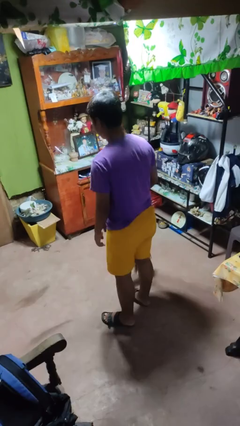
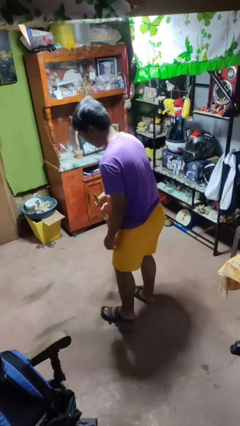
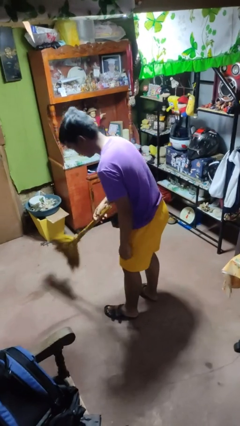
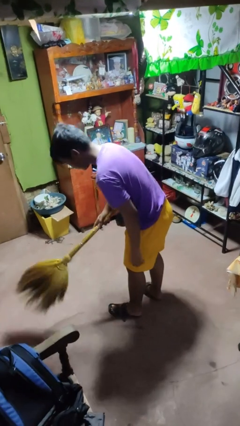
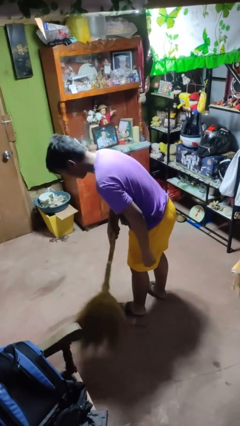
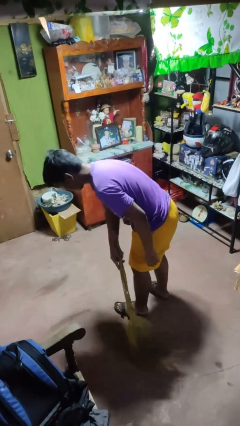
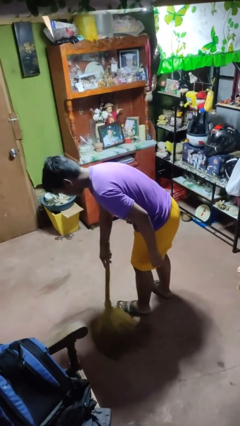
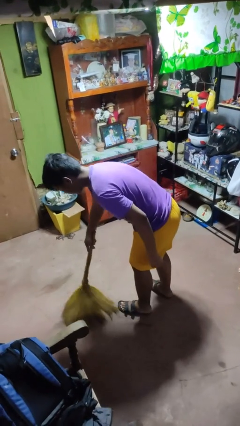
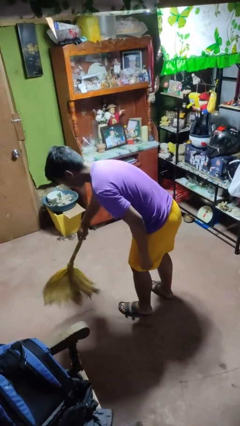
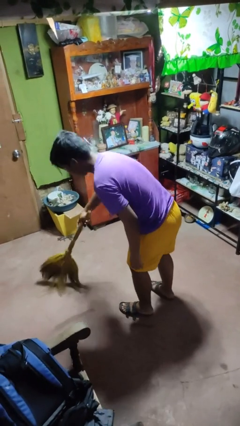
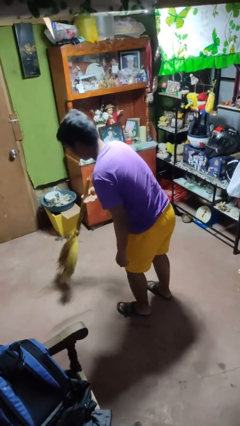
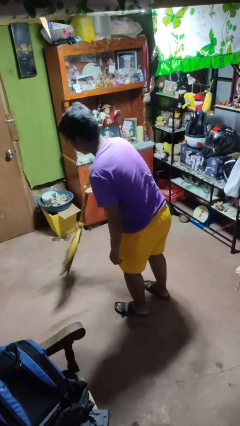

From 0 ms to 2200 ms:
person sweeps floor

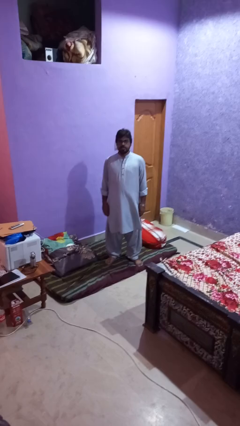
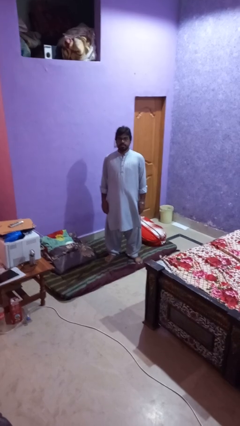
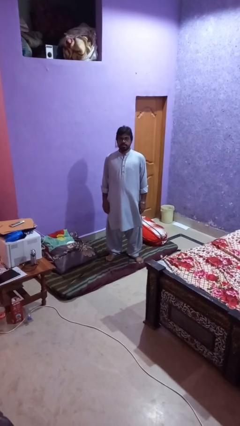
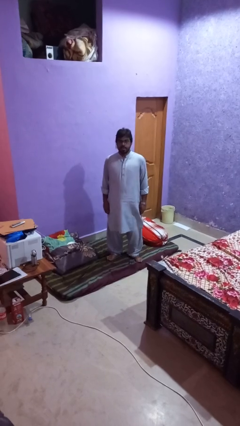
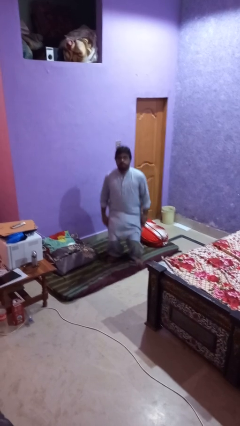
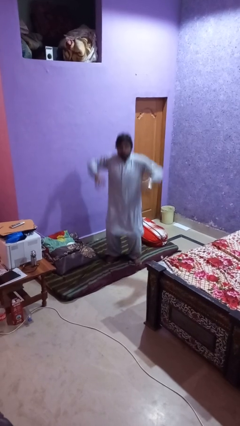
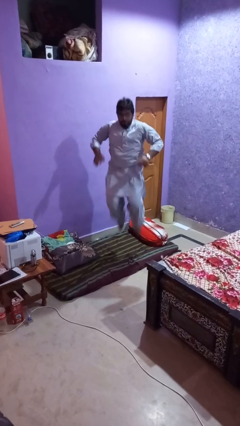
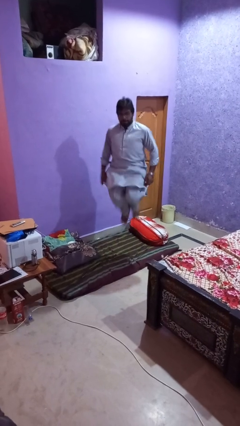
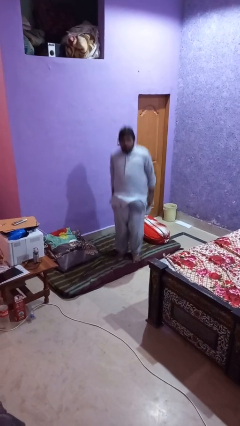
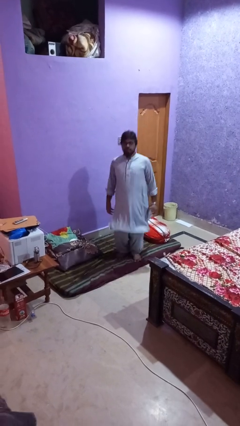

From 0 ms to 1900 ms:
person jumps

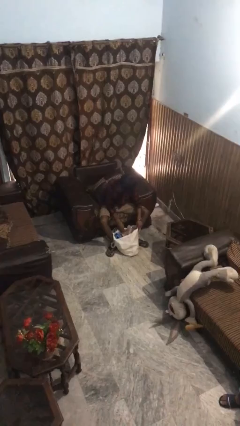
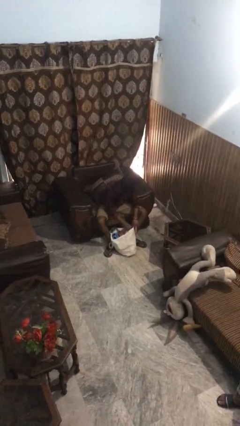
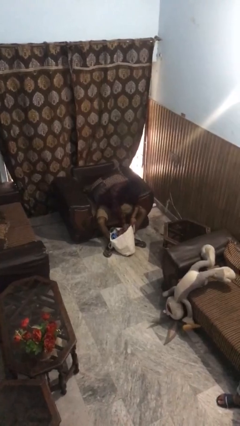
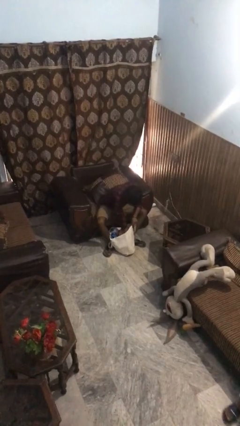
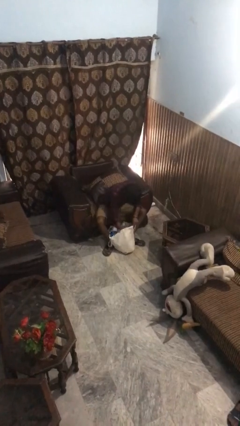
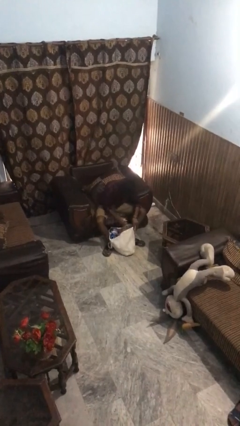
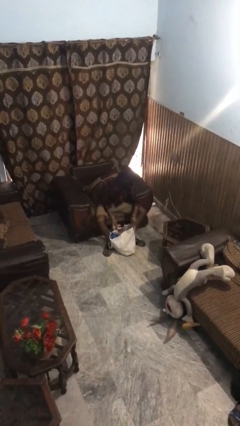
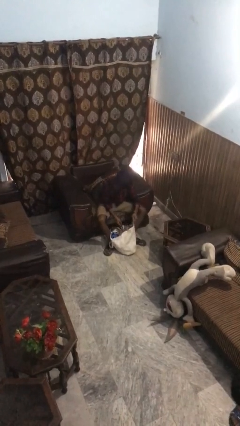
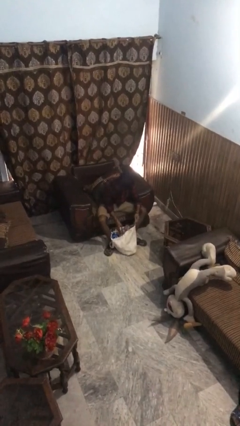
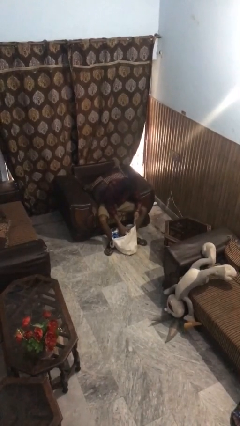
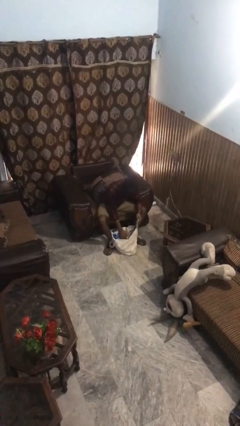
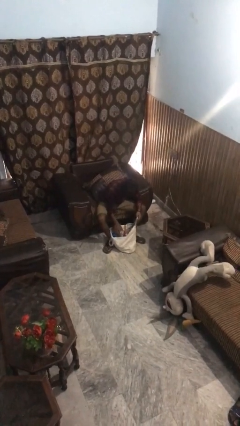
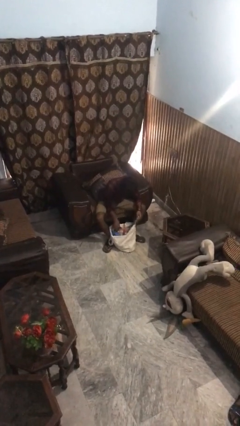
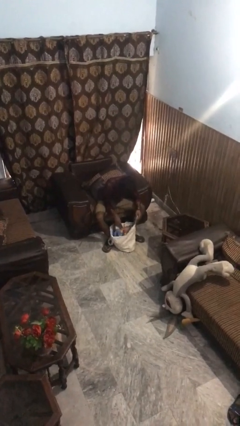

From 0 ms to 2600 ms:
person searches in bag

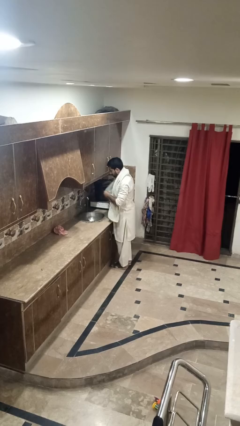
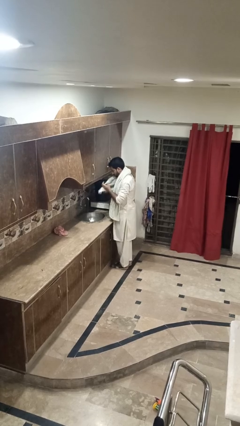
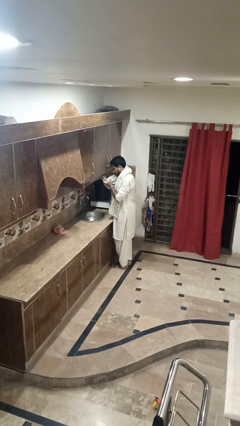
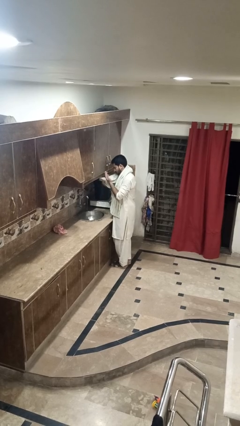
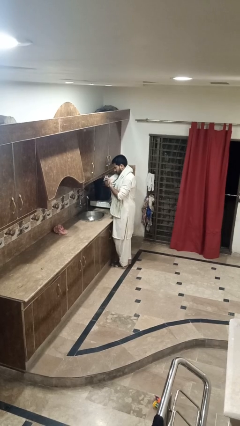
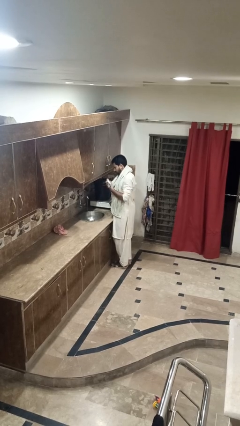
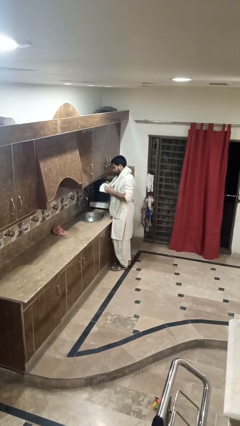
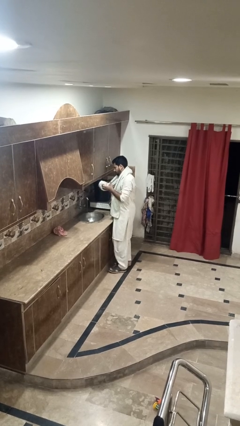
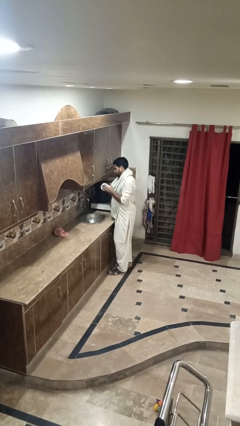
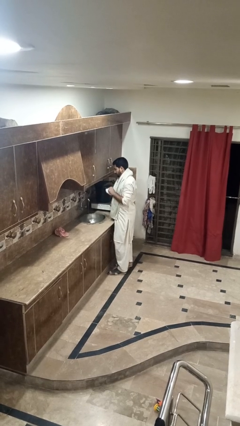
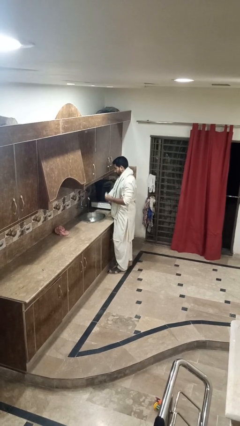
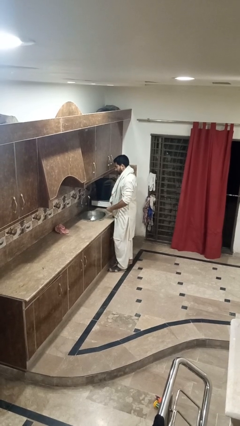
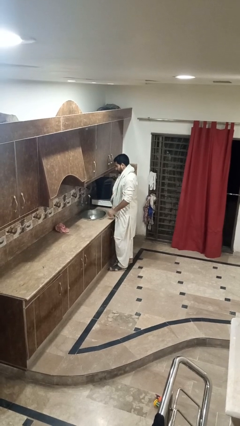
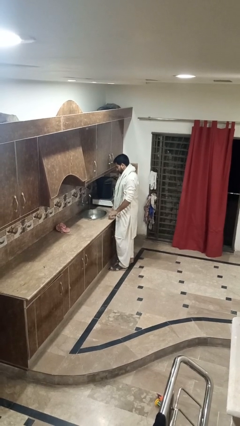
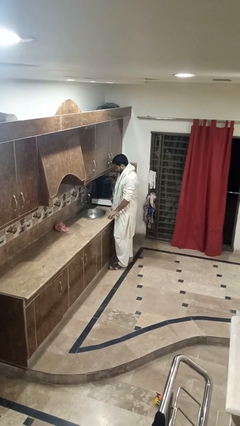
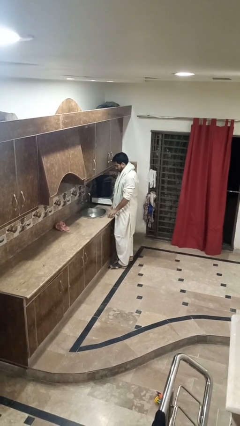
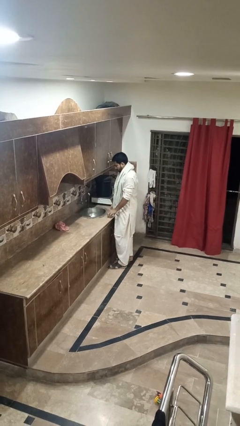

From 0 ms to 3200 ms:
person dries hands with towel

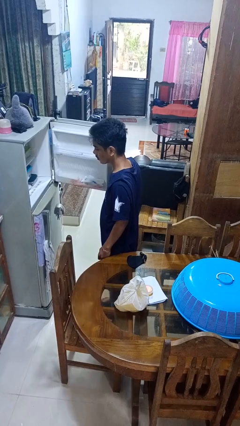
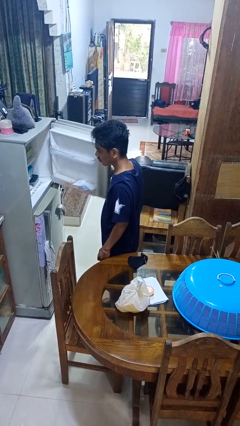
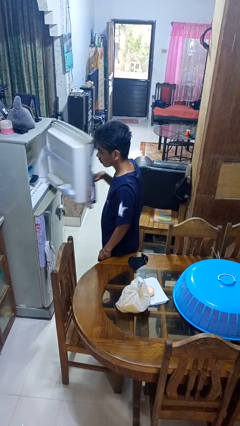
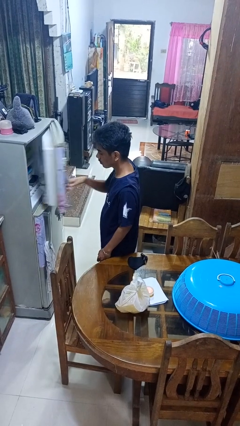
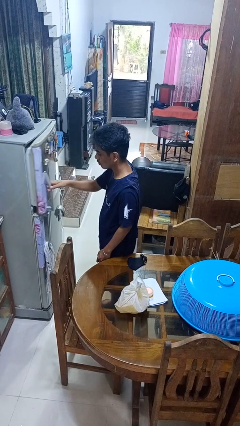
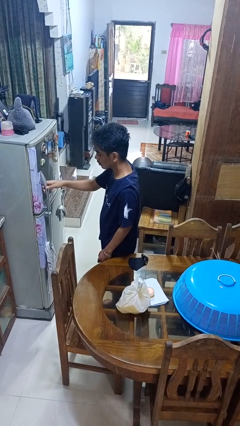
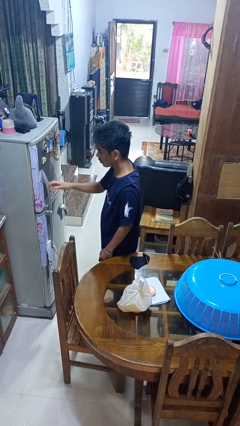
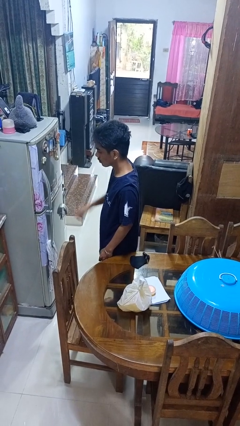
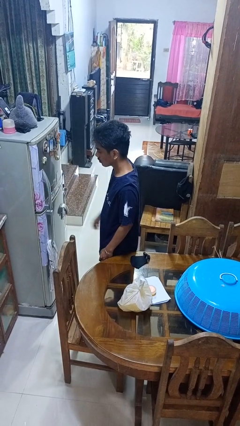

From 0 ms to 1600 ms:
person closes refrigerator

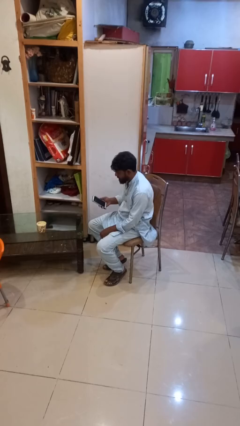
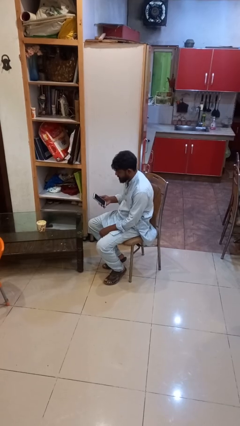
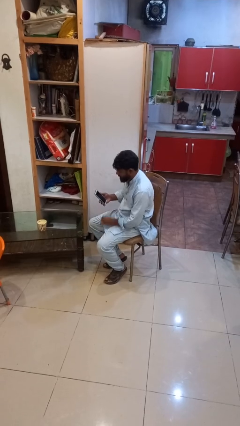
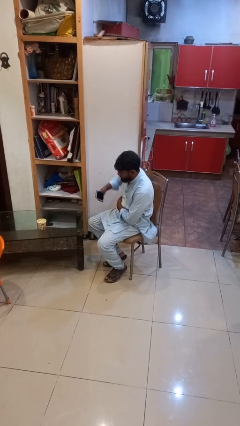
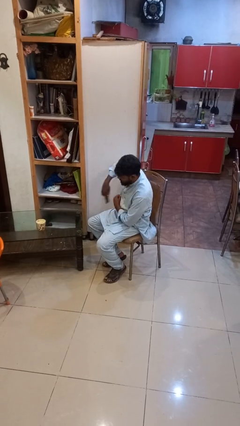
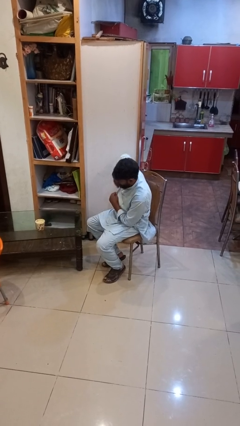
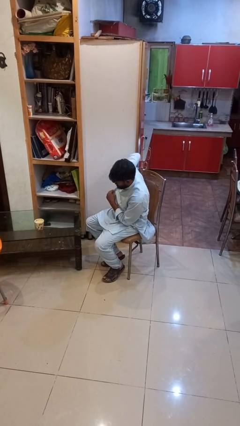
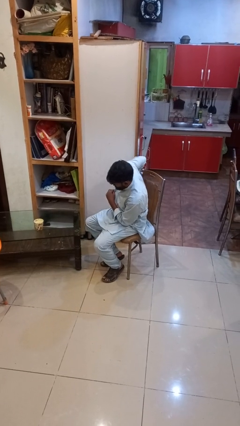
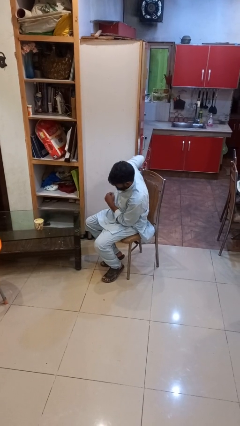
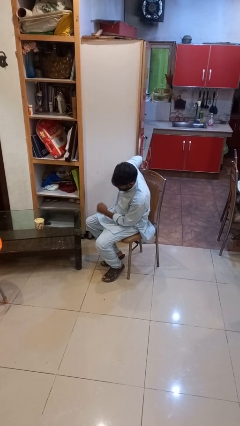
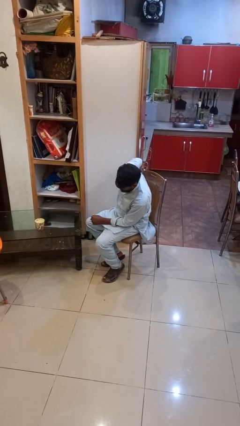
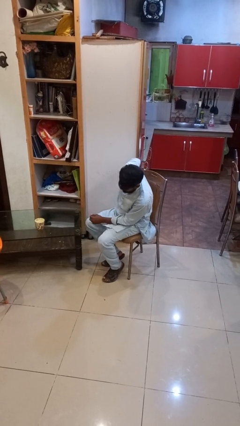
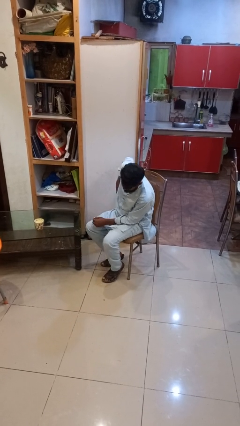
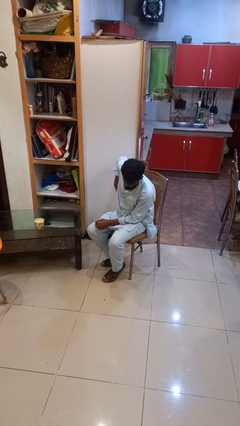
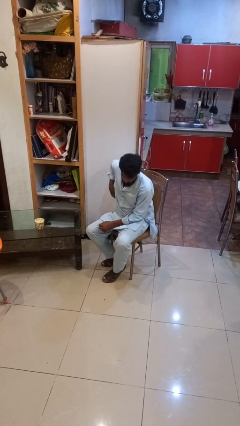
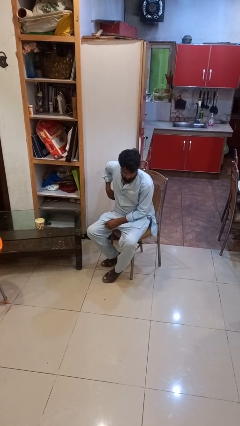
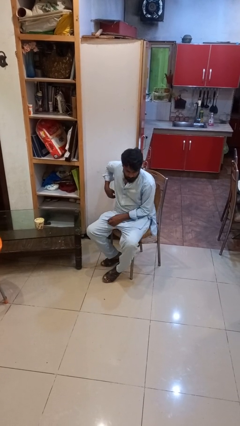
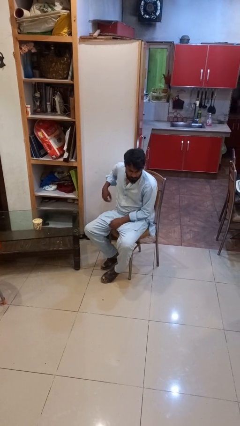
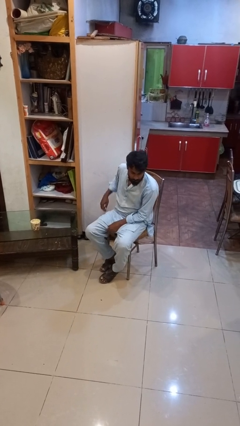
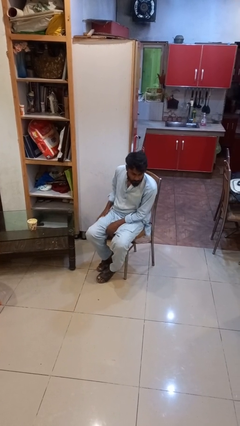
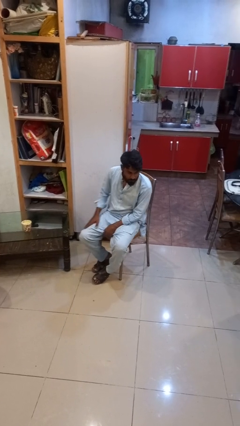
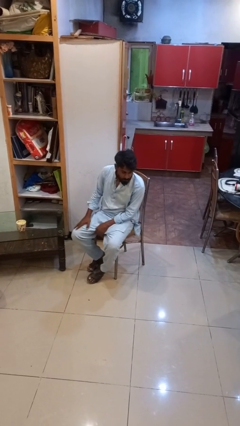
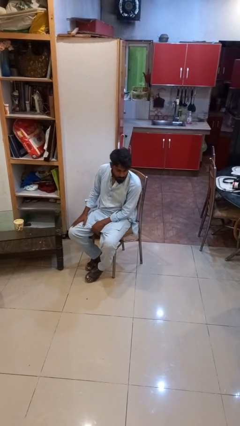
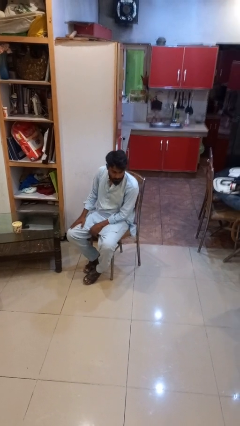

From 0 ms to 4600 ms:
person puts phone into pocket

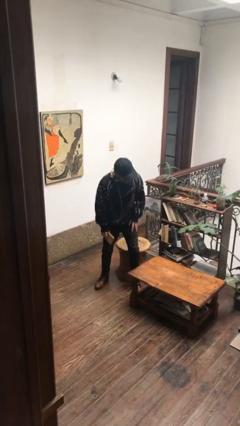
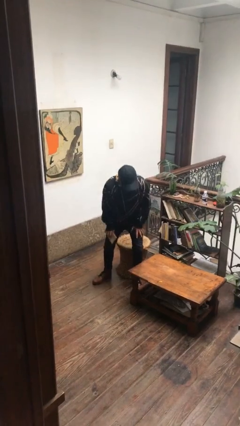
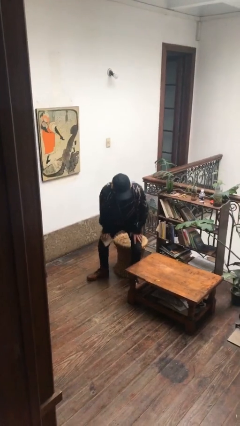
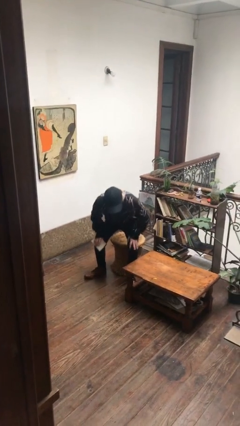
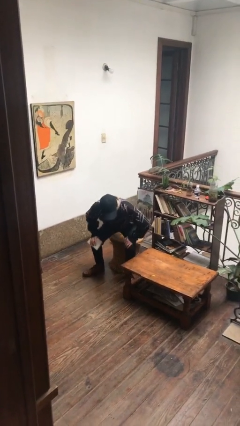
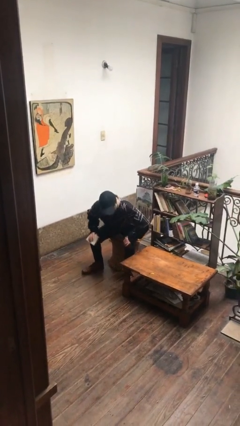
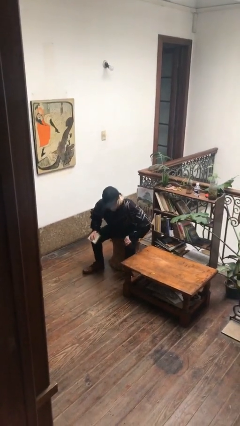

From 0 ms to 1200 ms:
person sits down
